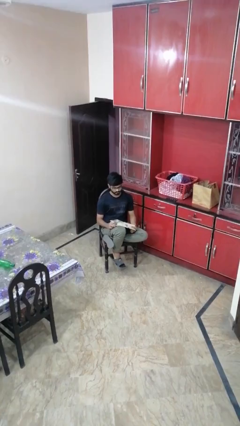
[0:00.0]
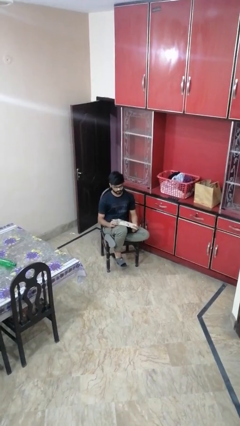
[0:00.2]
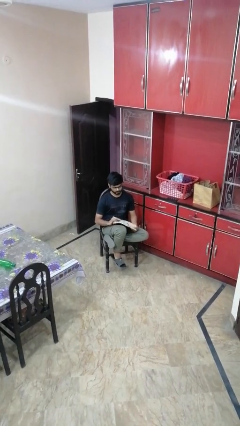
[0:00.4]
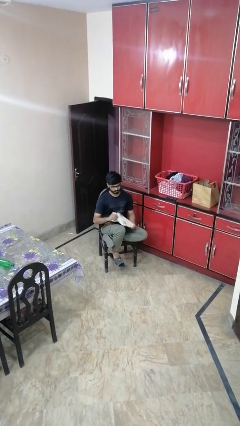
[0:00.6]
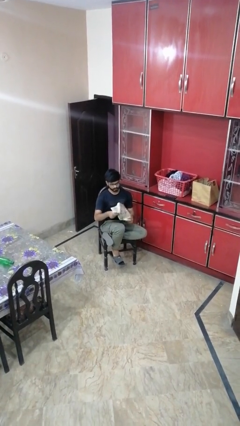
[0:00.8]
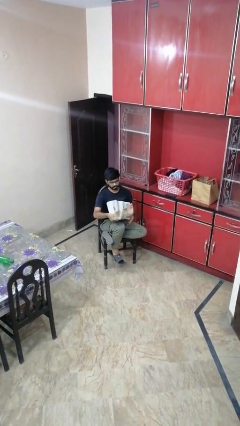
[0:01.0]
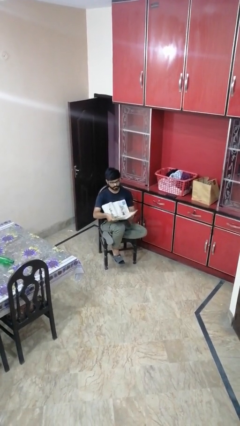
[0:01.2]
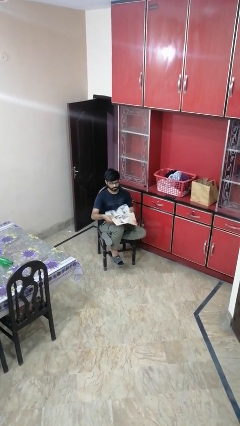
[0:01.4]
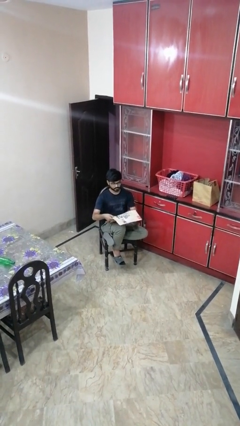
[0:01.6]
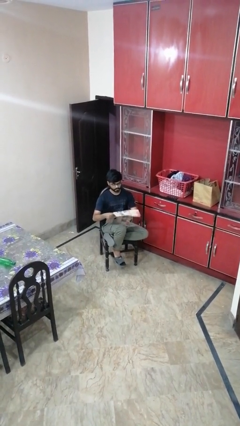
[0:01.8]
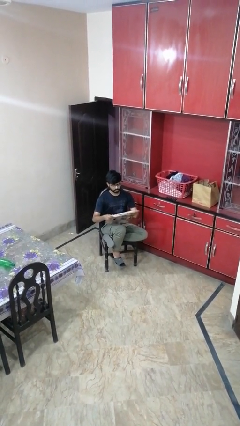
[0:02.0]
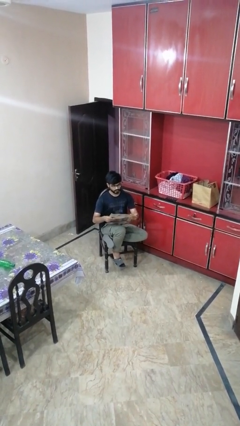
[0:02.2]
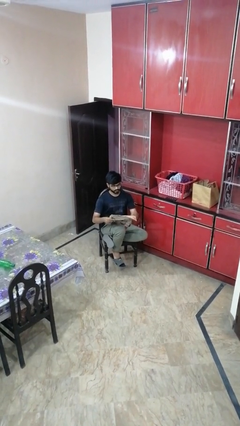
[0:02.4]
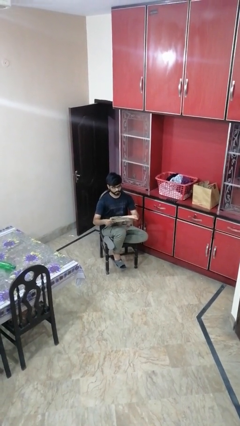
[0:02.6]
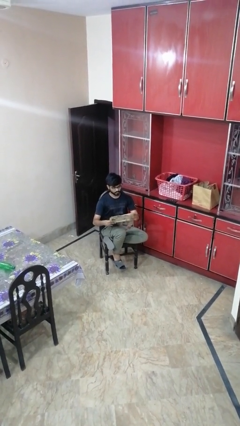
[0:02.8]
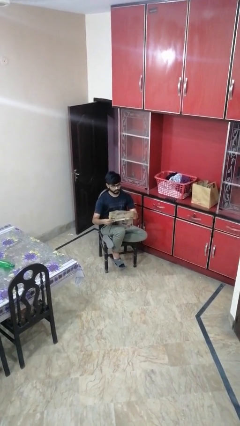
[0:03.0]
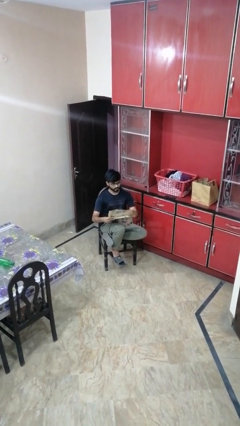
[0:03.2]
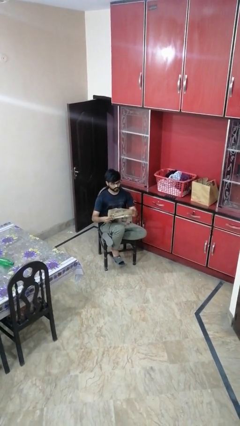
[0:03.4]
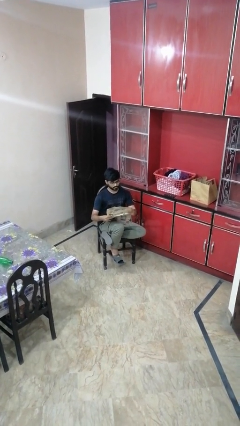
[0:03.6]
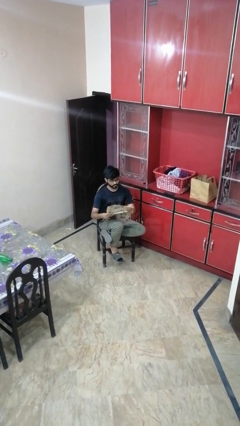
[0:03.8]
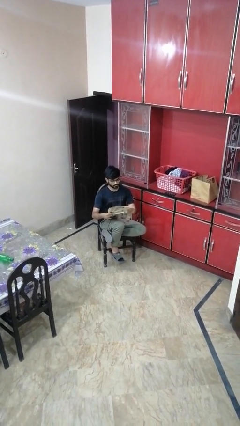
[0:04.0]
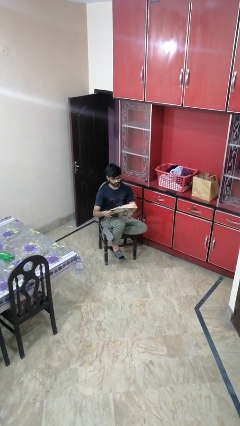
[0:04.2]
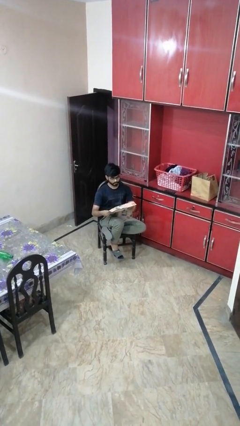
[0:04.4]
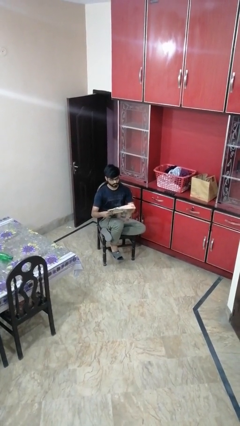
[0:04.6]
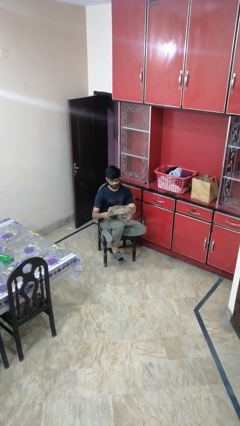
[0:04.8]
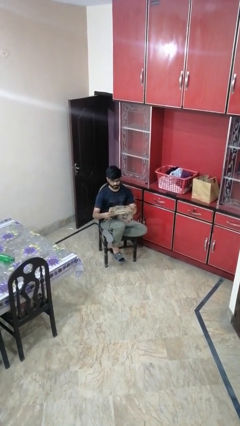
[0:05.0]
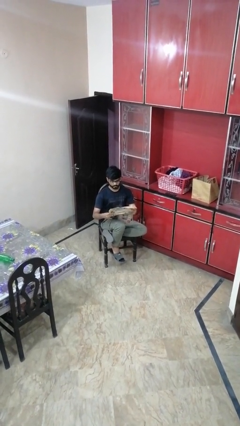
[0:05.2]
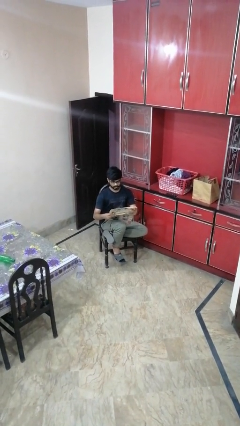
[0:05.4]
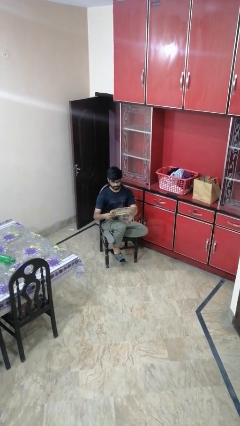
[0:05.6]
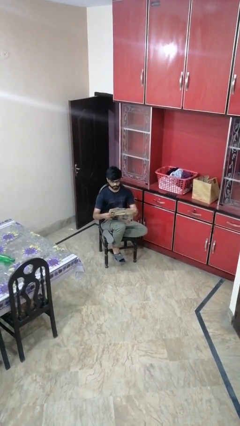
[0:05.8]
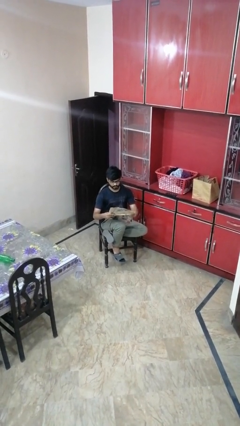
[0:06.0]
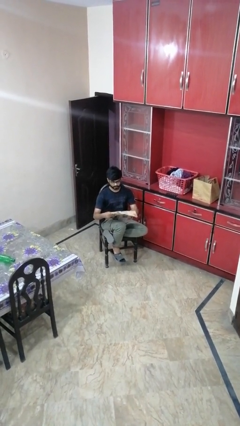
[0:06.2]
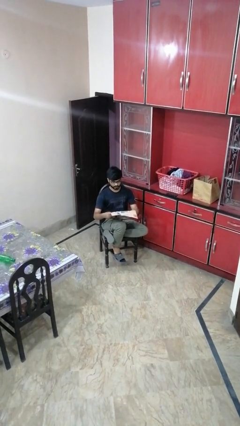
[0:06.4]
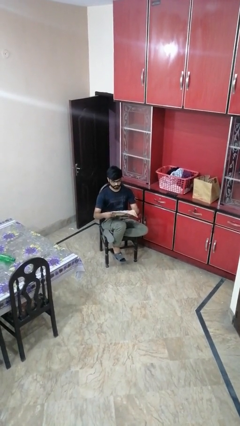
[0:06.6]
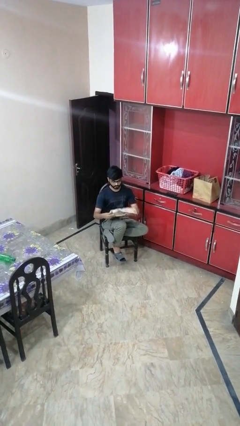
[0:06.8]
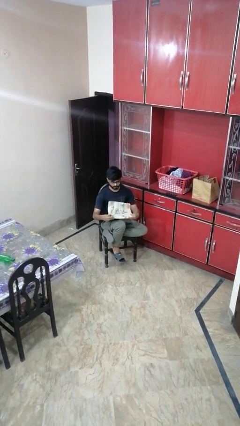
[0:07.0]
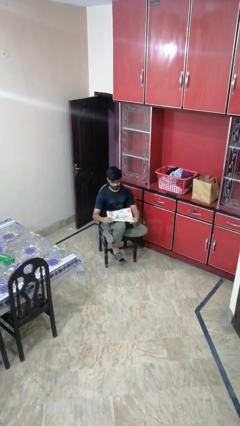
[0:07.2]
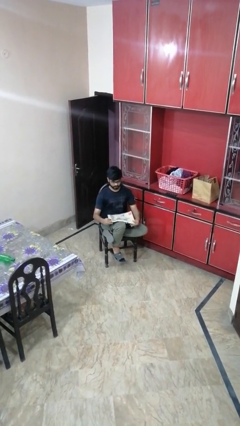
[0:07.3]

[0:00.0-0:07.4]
person reads newspaper

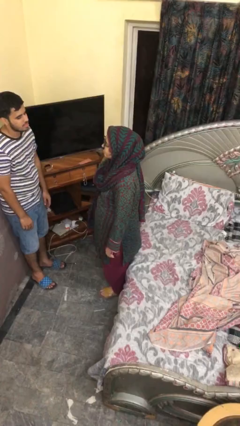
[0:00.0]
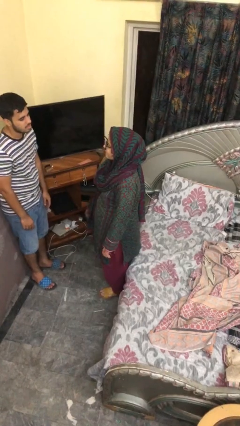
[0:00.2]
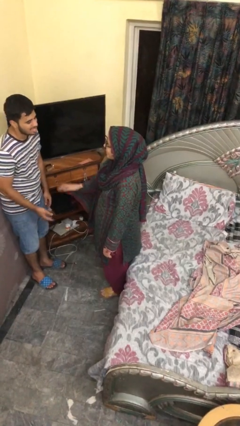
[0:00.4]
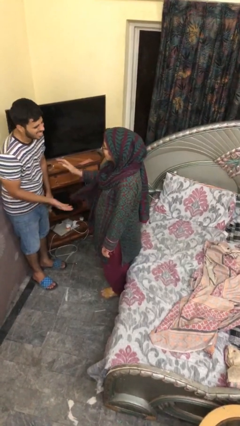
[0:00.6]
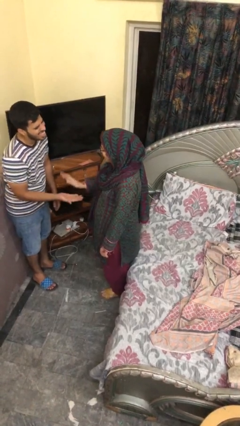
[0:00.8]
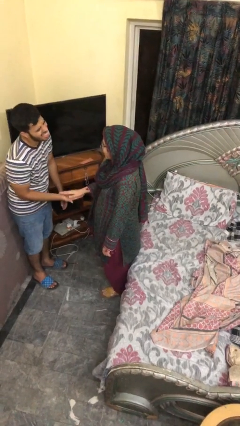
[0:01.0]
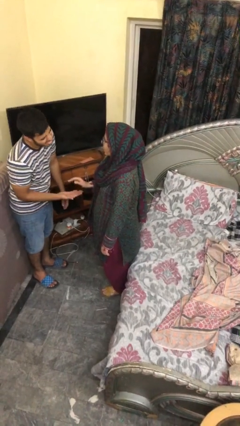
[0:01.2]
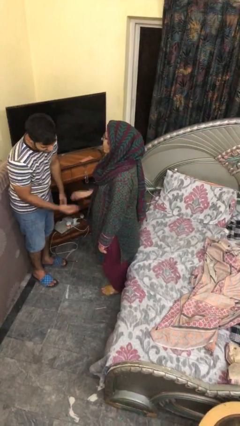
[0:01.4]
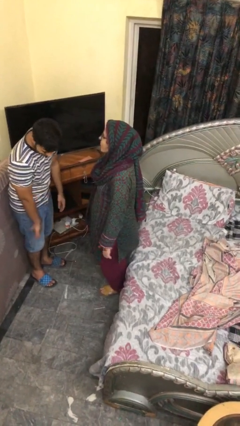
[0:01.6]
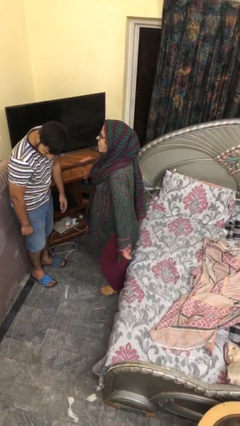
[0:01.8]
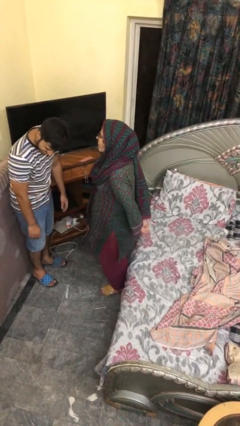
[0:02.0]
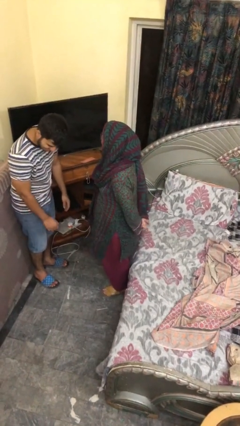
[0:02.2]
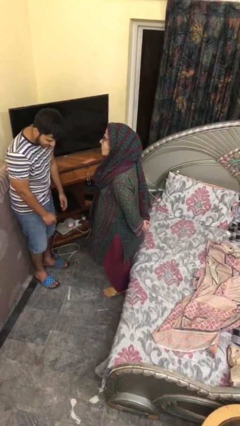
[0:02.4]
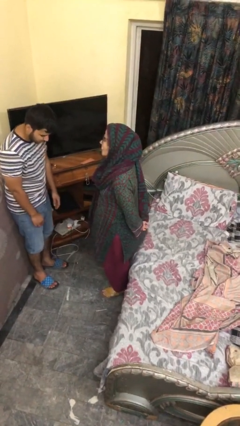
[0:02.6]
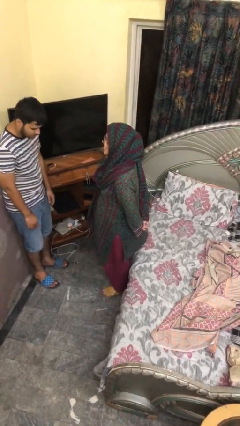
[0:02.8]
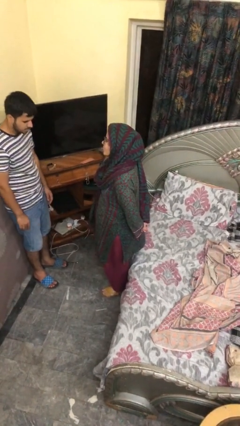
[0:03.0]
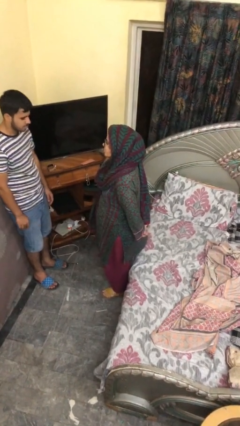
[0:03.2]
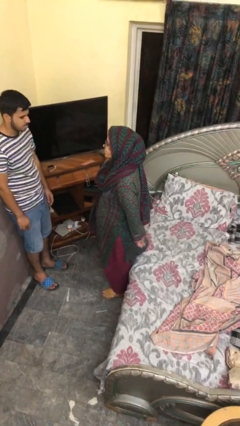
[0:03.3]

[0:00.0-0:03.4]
person laughs with person

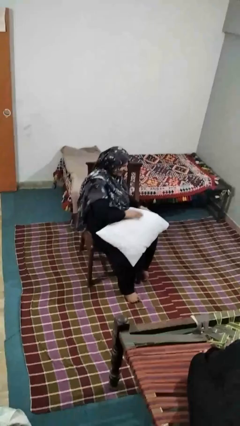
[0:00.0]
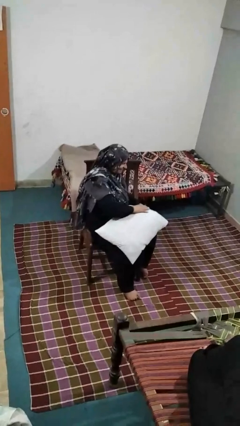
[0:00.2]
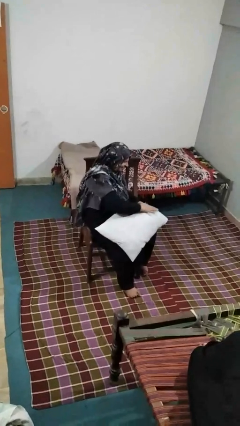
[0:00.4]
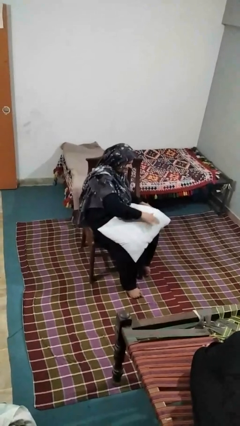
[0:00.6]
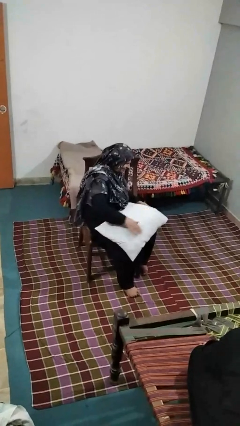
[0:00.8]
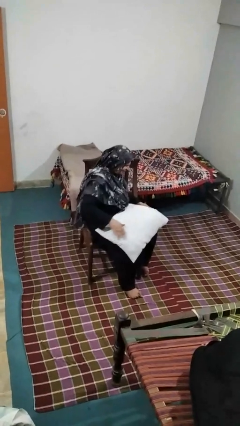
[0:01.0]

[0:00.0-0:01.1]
person waves hand over object

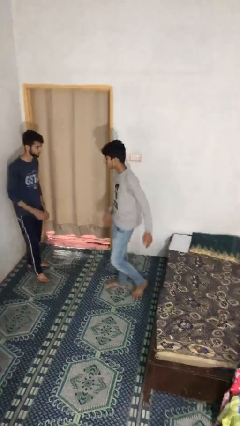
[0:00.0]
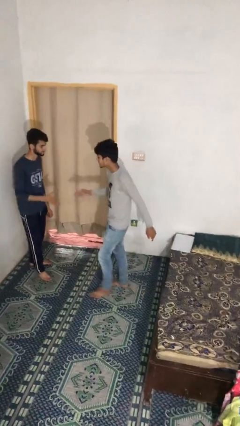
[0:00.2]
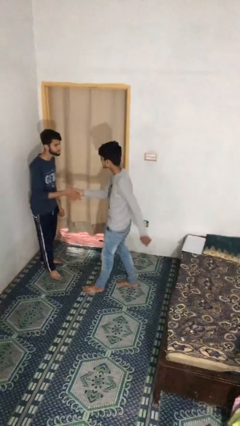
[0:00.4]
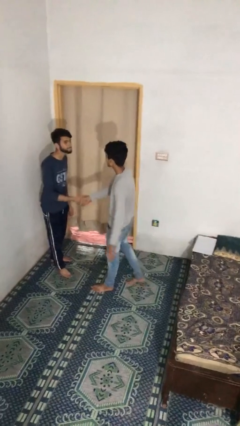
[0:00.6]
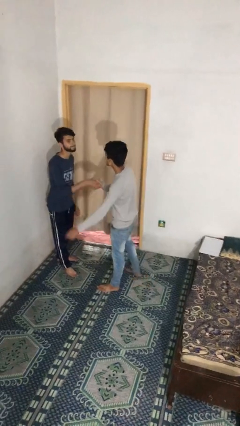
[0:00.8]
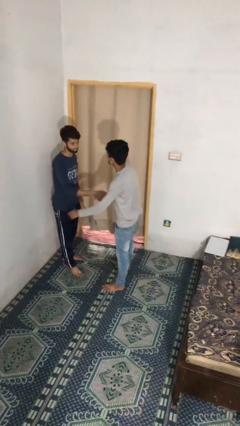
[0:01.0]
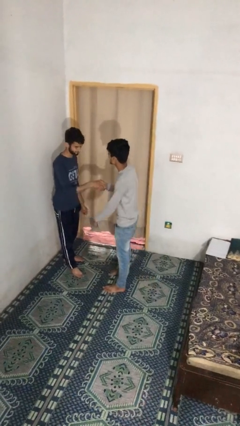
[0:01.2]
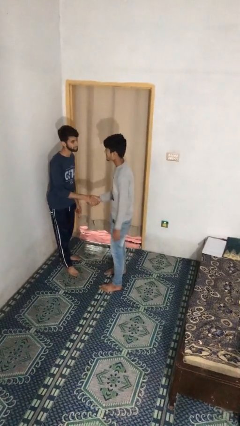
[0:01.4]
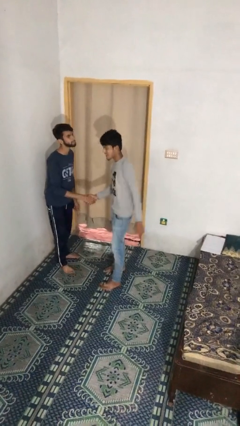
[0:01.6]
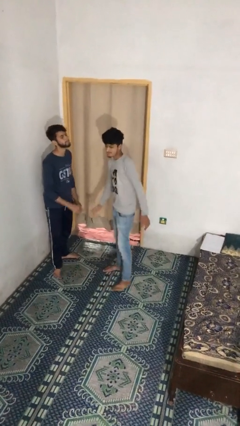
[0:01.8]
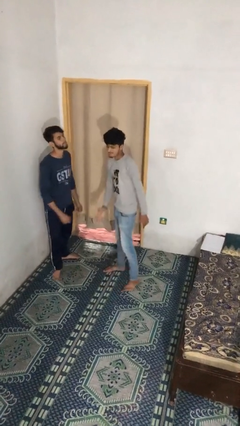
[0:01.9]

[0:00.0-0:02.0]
person shakes hand

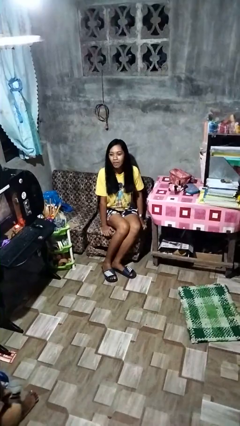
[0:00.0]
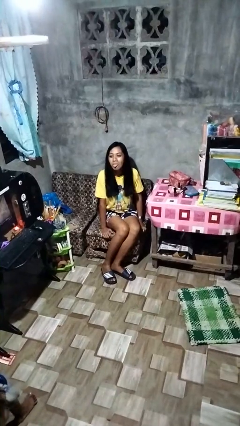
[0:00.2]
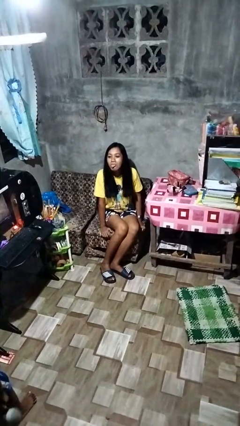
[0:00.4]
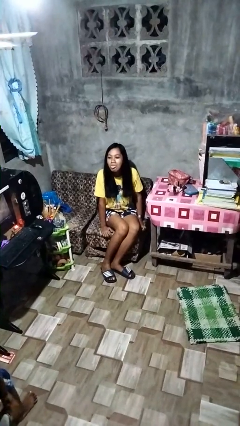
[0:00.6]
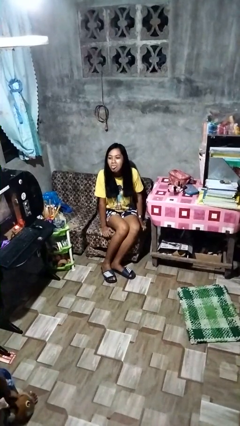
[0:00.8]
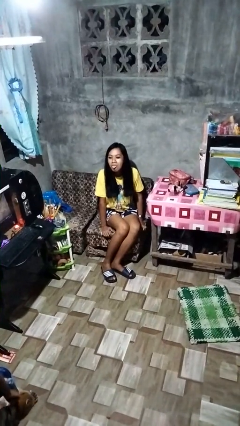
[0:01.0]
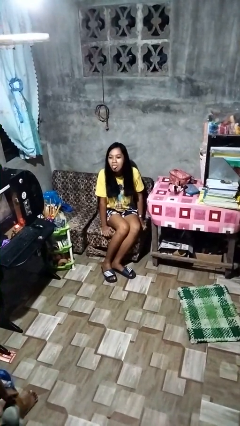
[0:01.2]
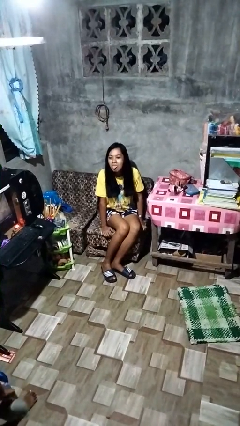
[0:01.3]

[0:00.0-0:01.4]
person sticks out tongue

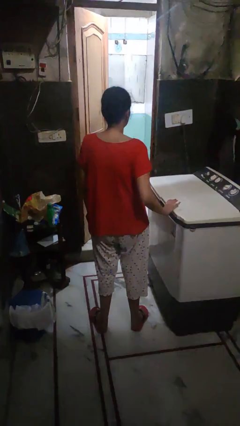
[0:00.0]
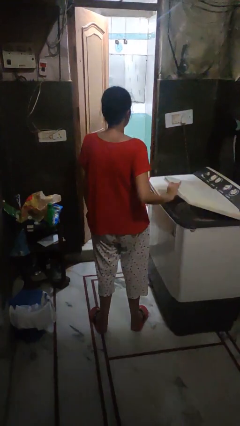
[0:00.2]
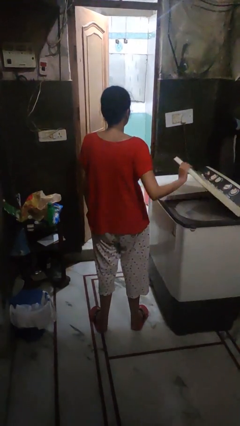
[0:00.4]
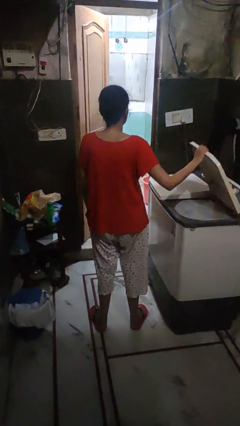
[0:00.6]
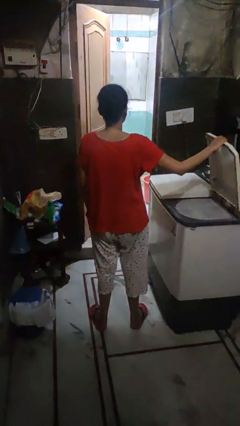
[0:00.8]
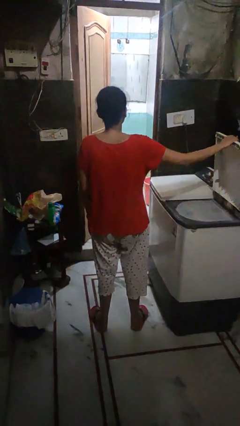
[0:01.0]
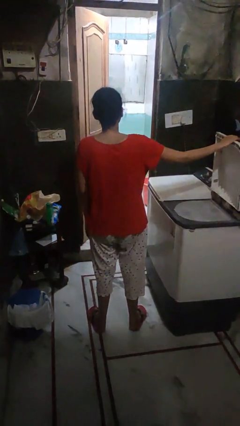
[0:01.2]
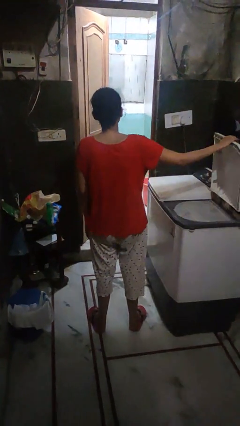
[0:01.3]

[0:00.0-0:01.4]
person opens clothes washer

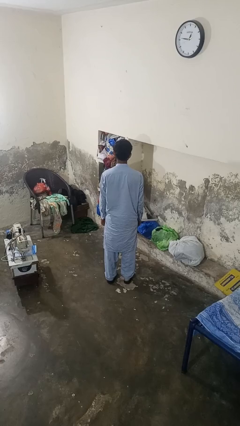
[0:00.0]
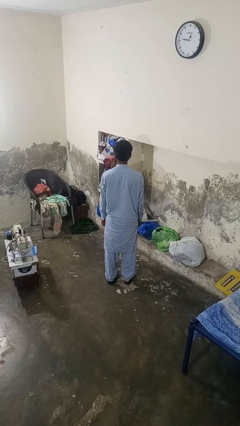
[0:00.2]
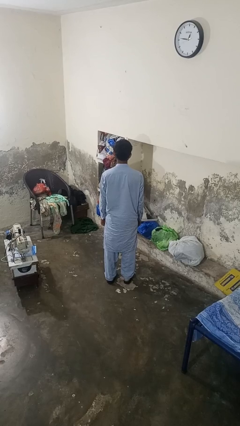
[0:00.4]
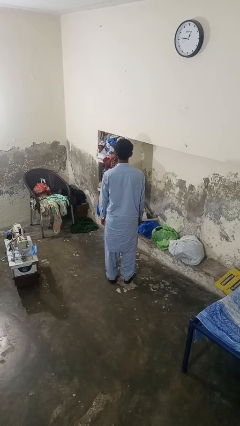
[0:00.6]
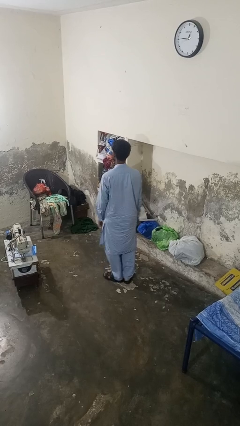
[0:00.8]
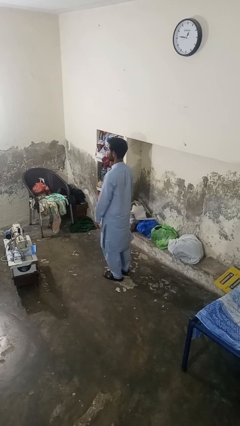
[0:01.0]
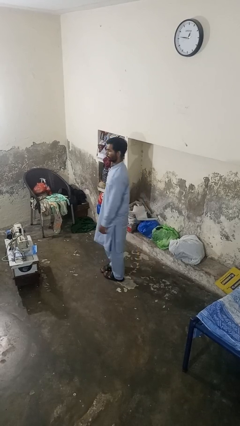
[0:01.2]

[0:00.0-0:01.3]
person twirls
